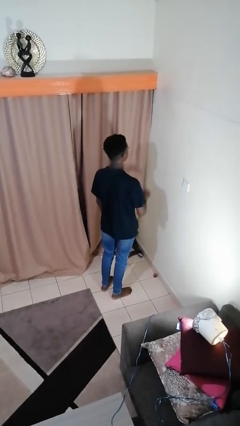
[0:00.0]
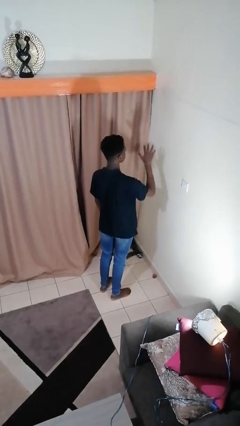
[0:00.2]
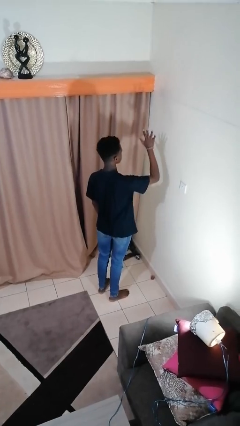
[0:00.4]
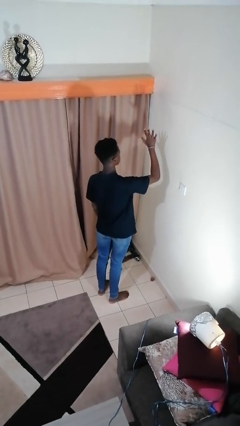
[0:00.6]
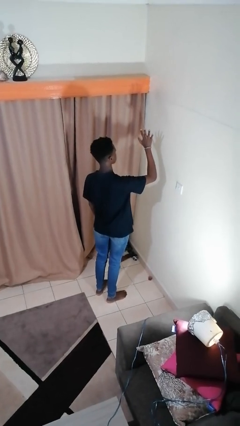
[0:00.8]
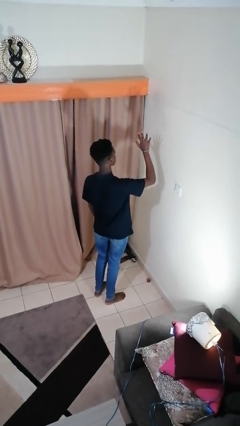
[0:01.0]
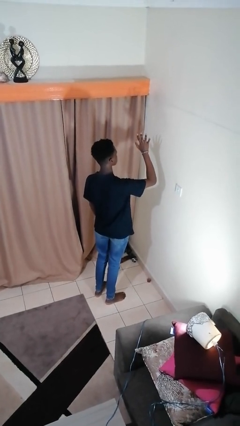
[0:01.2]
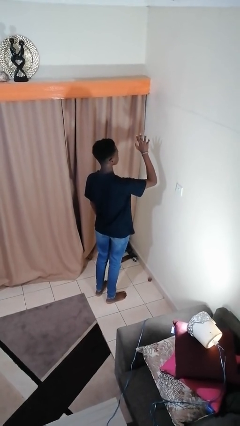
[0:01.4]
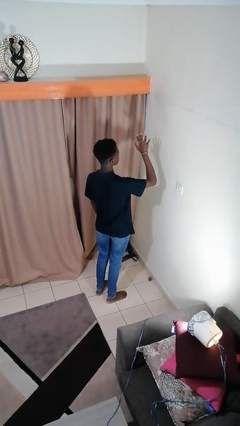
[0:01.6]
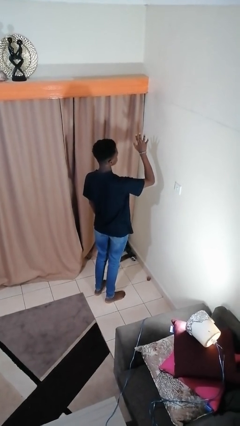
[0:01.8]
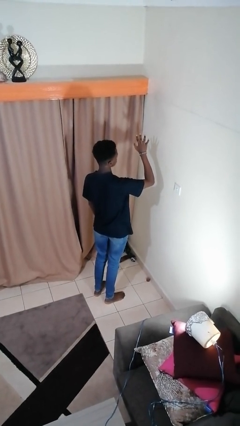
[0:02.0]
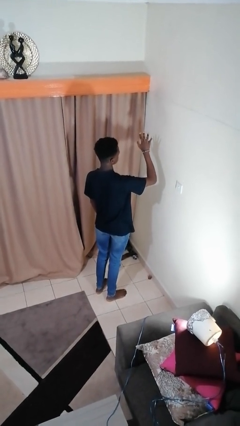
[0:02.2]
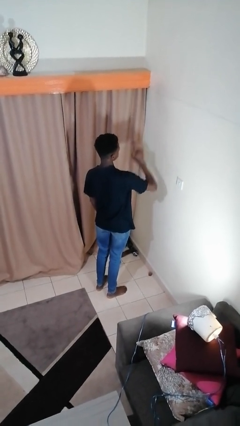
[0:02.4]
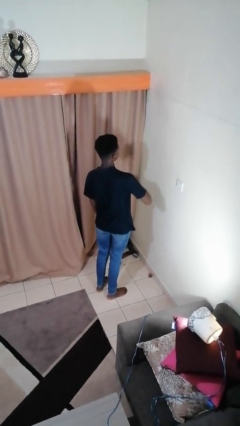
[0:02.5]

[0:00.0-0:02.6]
person gestures number five

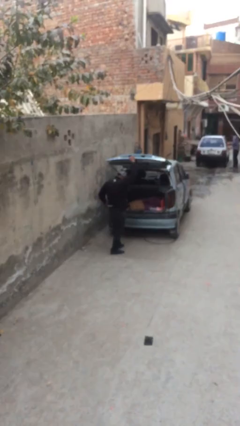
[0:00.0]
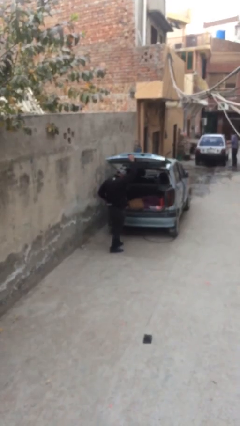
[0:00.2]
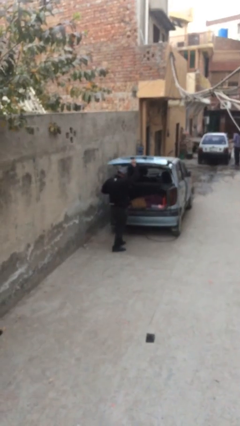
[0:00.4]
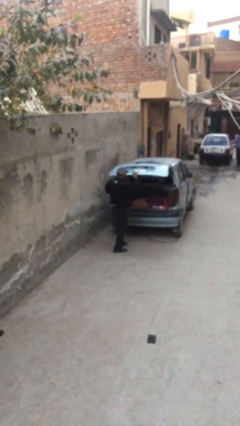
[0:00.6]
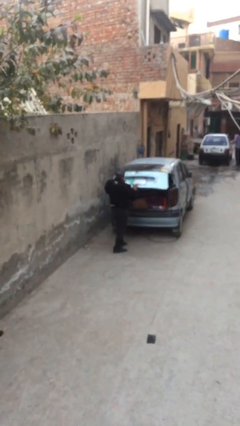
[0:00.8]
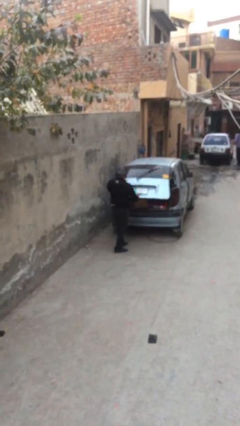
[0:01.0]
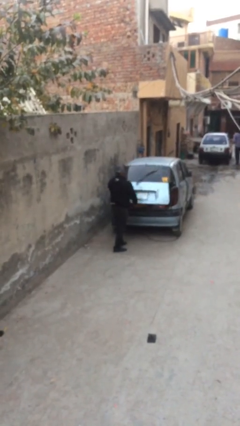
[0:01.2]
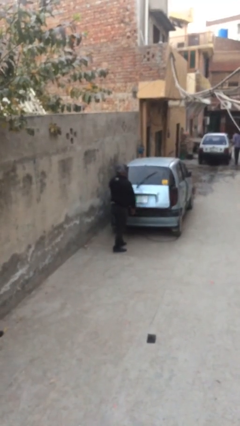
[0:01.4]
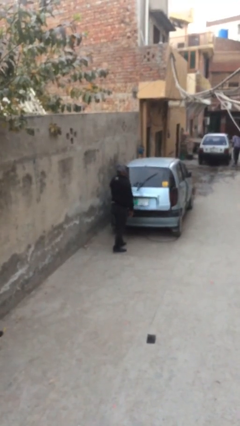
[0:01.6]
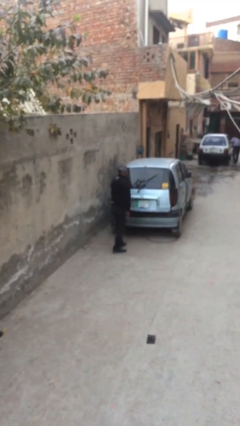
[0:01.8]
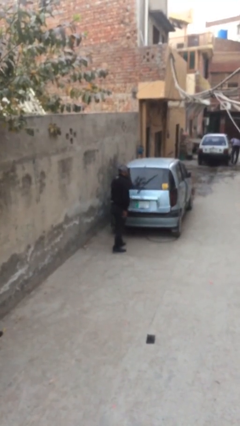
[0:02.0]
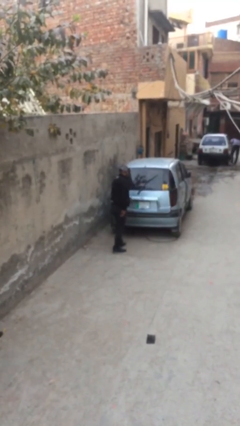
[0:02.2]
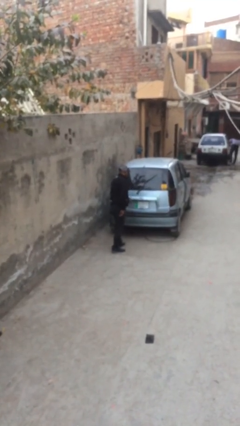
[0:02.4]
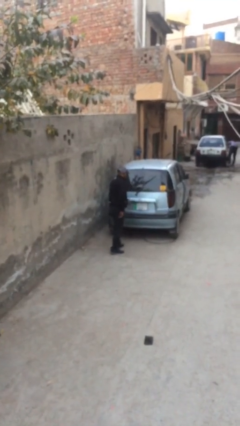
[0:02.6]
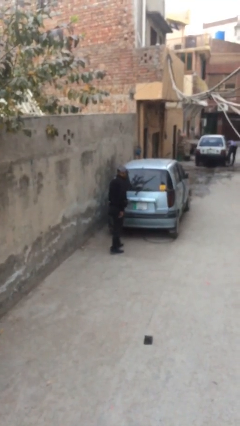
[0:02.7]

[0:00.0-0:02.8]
person closes car trunk

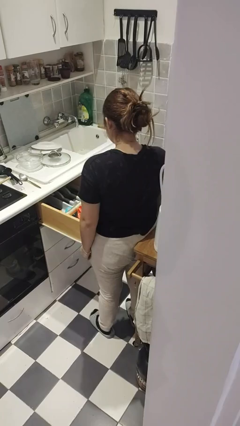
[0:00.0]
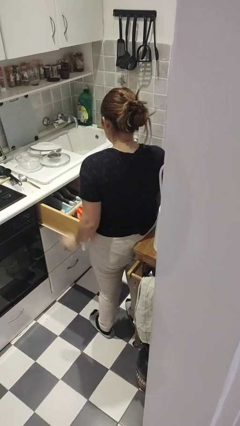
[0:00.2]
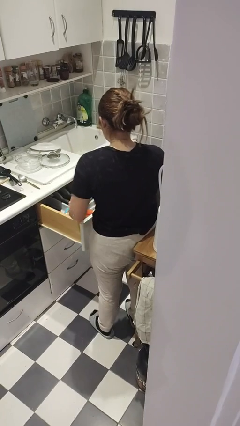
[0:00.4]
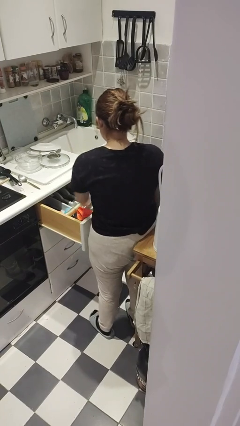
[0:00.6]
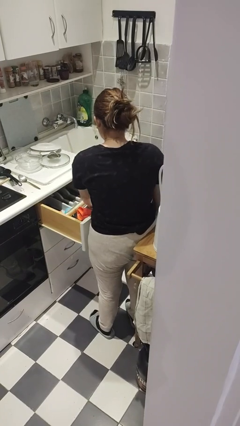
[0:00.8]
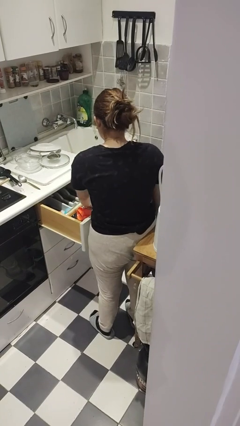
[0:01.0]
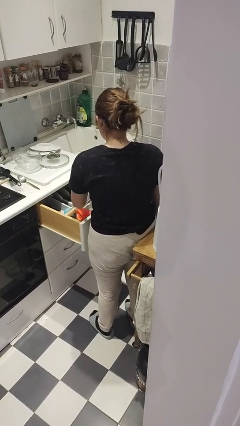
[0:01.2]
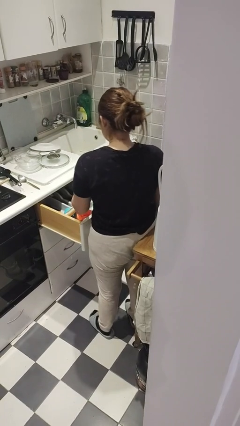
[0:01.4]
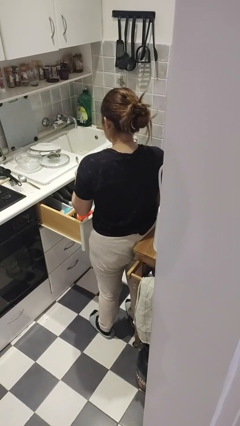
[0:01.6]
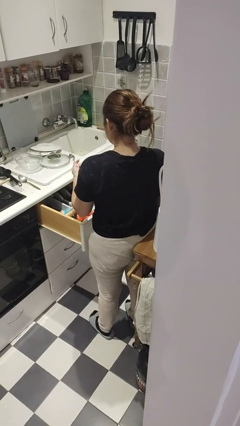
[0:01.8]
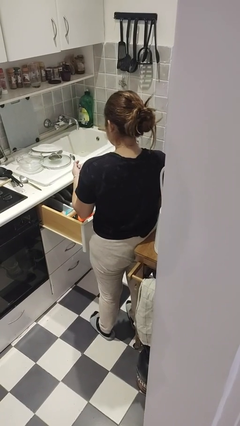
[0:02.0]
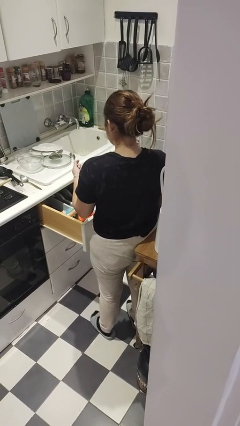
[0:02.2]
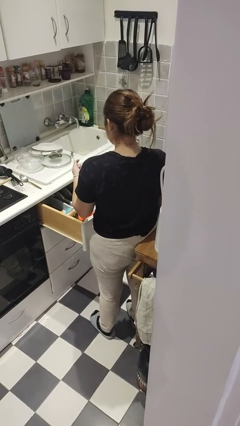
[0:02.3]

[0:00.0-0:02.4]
person takes object from kitchen drawer

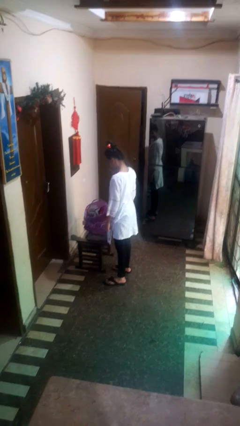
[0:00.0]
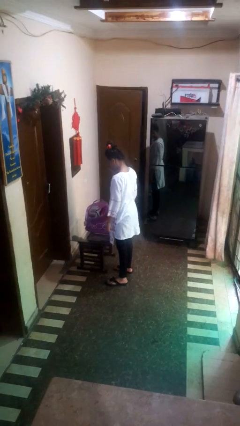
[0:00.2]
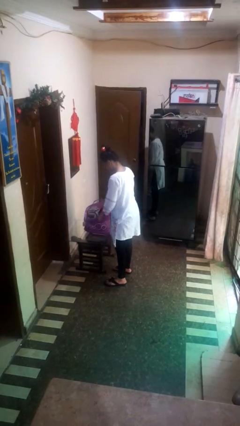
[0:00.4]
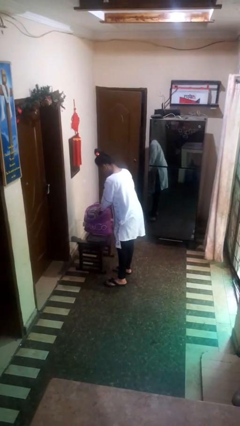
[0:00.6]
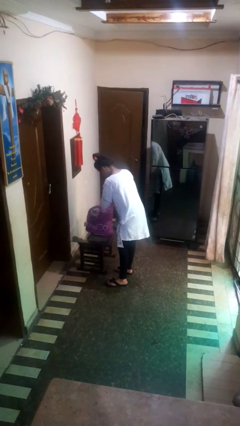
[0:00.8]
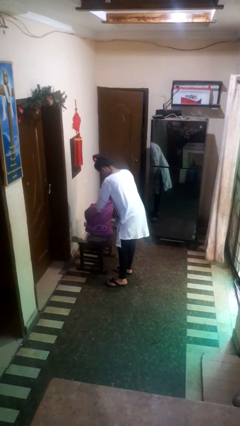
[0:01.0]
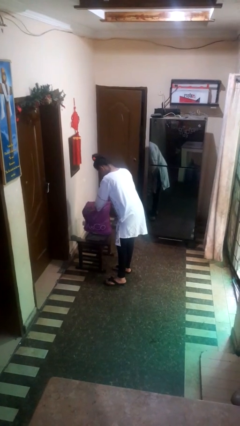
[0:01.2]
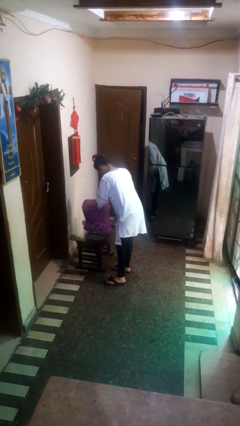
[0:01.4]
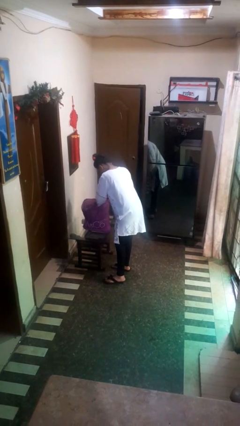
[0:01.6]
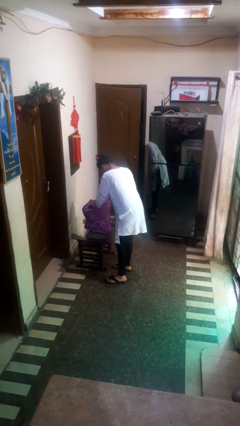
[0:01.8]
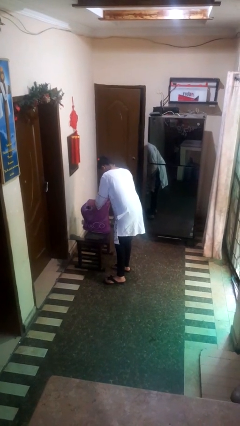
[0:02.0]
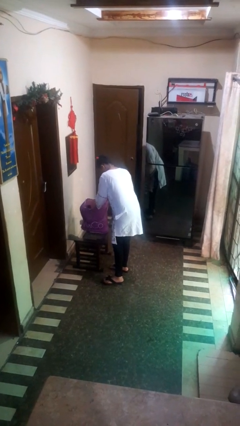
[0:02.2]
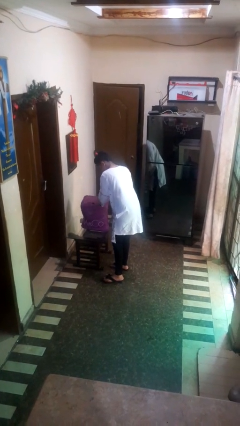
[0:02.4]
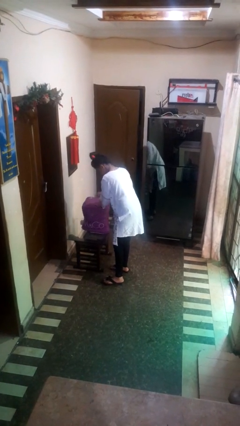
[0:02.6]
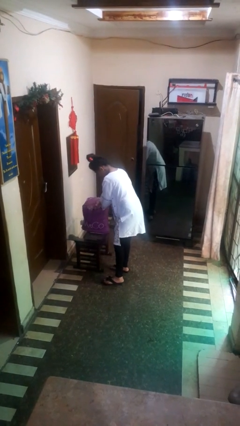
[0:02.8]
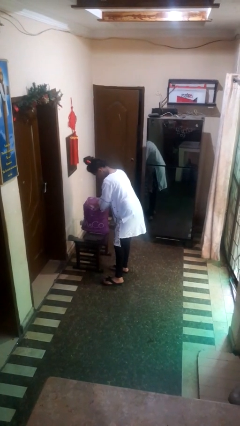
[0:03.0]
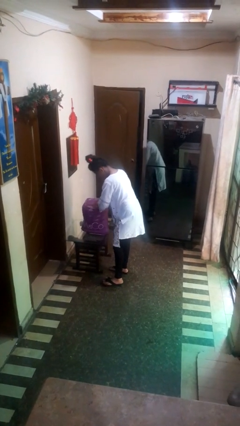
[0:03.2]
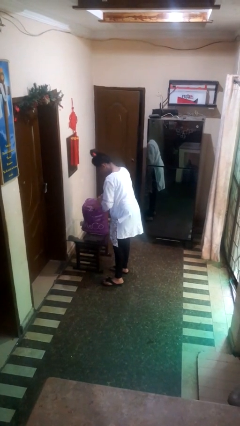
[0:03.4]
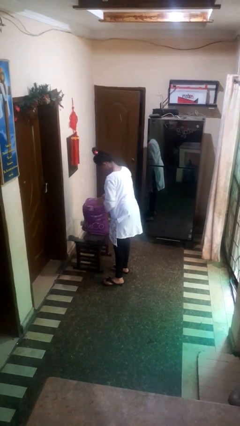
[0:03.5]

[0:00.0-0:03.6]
person searches in bag

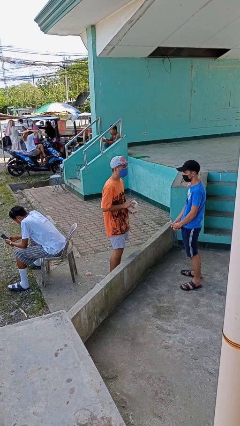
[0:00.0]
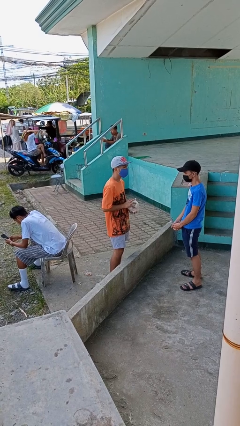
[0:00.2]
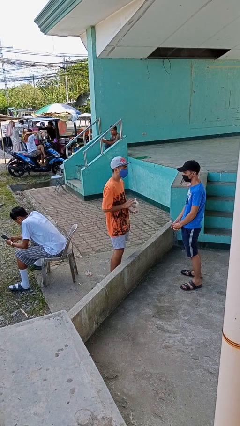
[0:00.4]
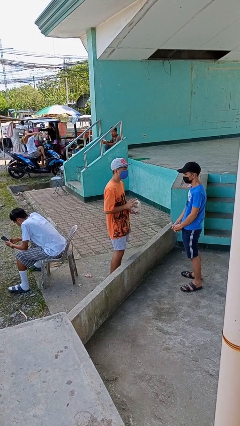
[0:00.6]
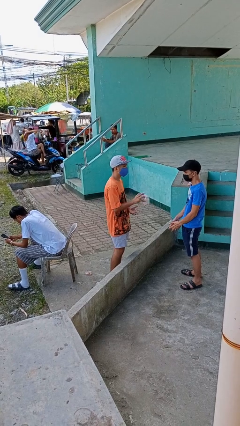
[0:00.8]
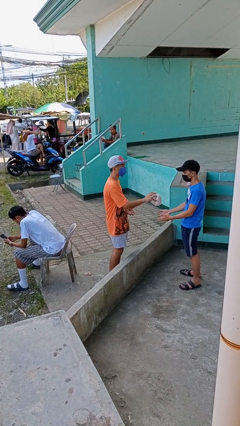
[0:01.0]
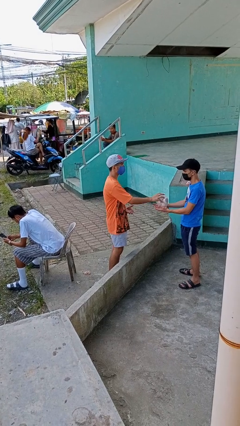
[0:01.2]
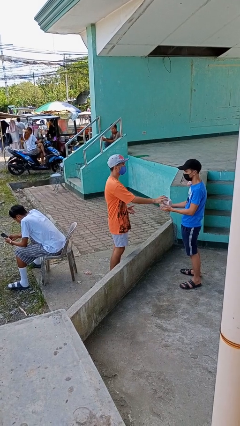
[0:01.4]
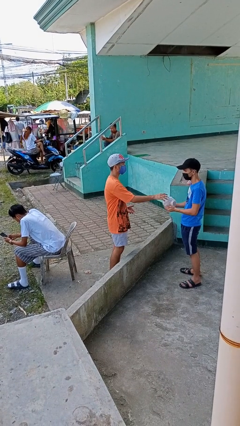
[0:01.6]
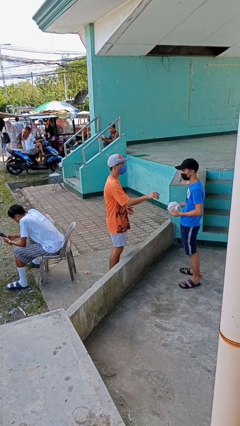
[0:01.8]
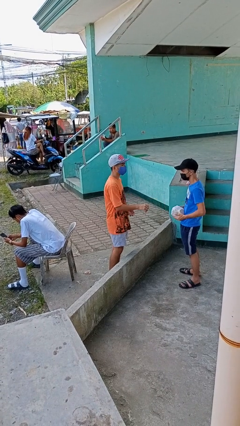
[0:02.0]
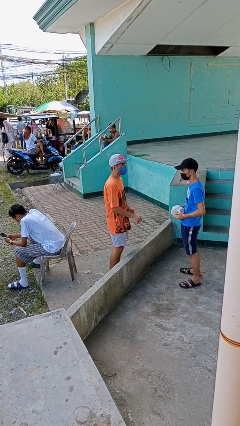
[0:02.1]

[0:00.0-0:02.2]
person transfers object to person

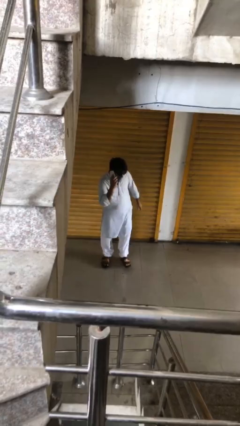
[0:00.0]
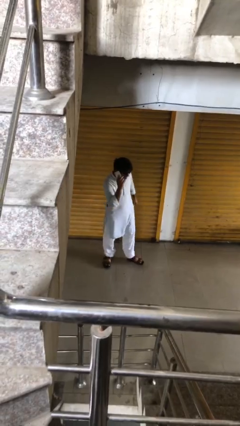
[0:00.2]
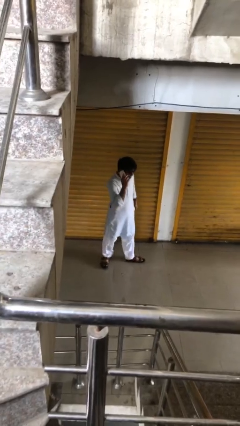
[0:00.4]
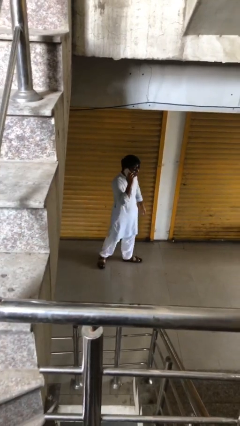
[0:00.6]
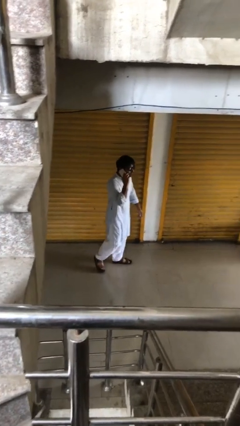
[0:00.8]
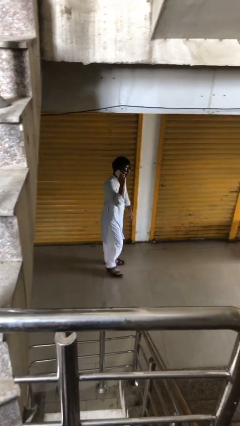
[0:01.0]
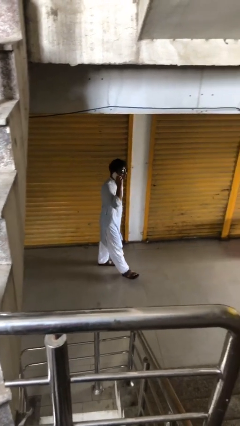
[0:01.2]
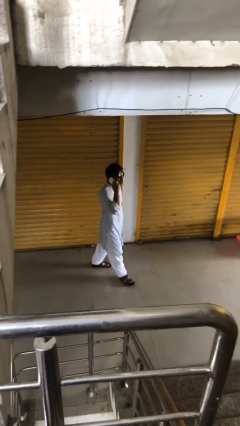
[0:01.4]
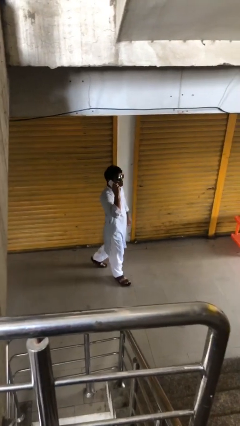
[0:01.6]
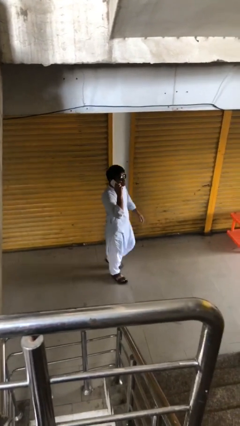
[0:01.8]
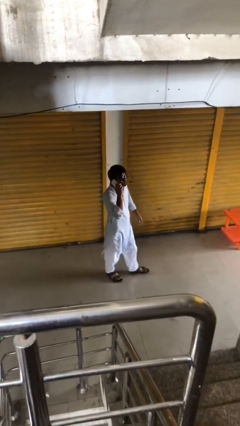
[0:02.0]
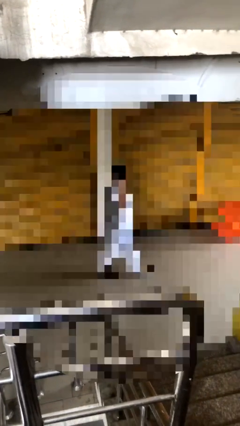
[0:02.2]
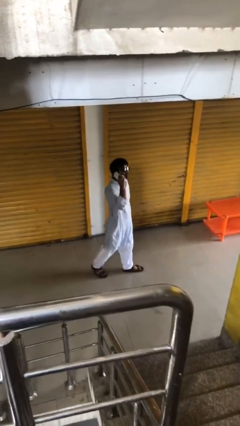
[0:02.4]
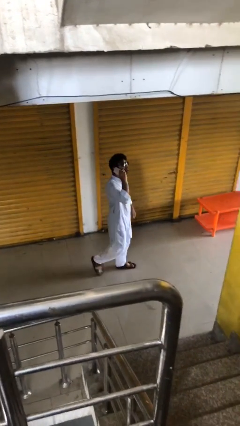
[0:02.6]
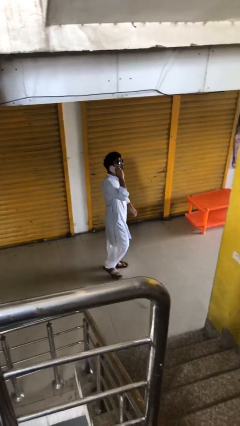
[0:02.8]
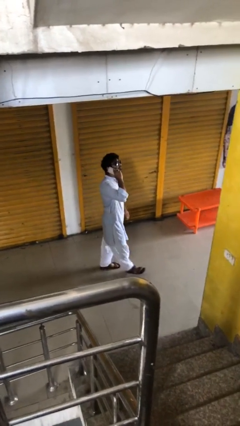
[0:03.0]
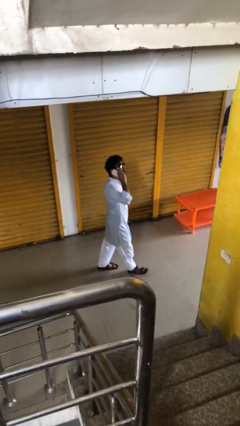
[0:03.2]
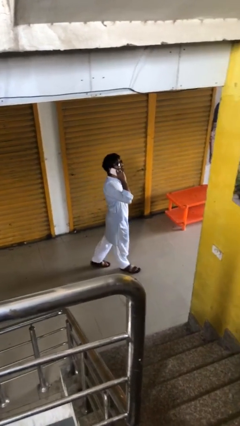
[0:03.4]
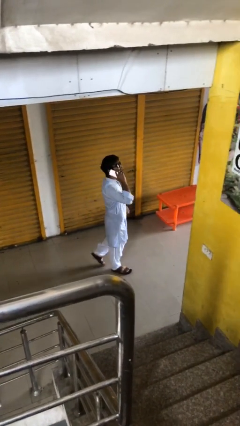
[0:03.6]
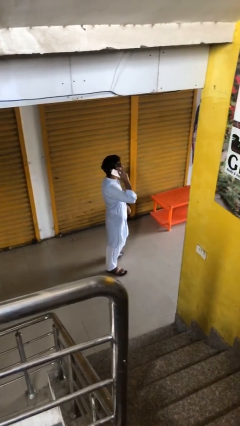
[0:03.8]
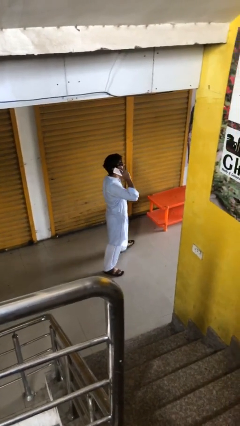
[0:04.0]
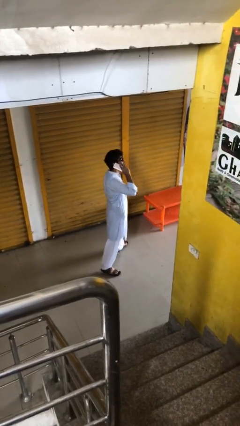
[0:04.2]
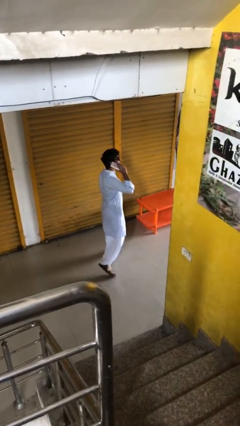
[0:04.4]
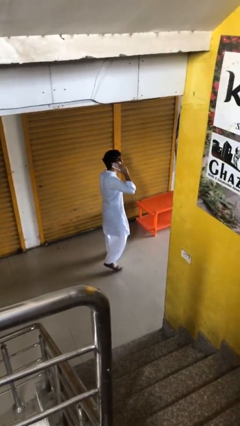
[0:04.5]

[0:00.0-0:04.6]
person talks on phone
